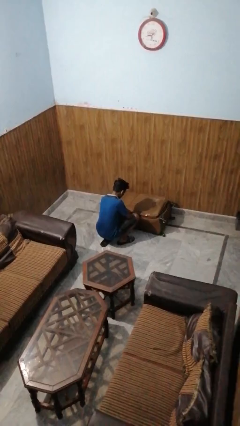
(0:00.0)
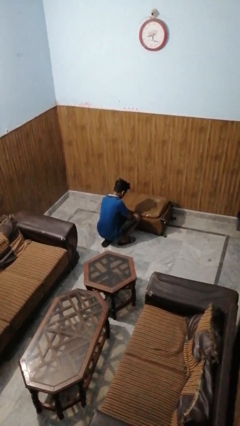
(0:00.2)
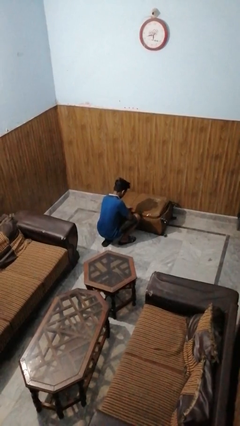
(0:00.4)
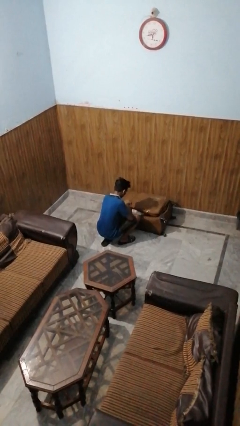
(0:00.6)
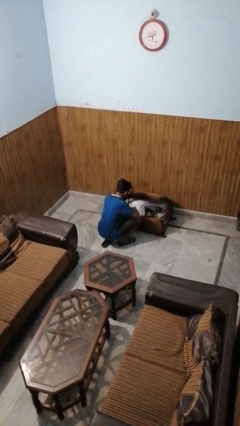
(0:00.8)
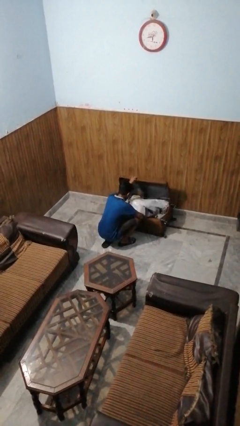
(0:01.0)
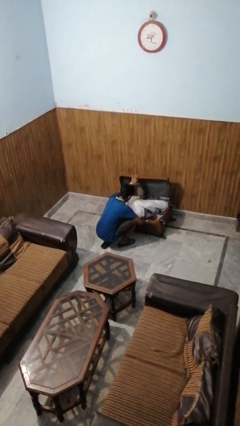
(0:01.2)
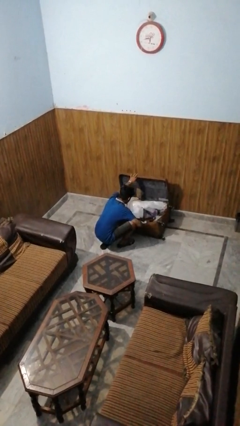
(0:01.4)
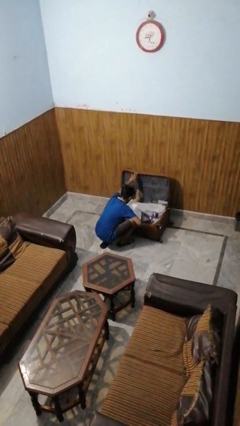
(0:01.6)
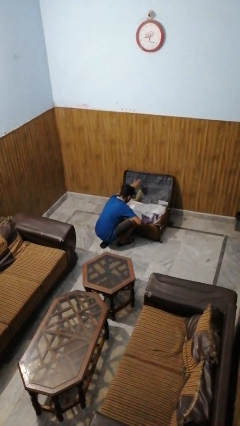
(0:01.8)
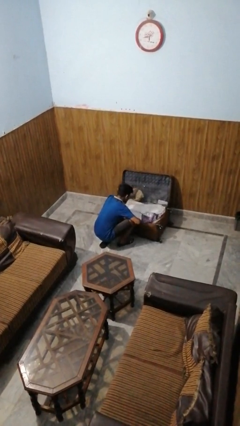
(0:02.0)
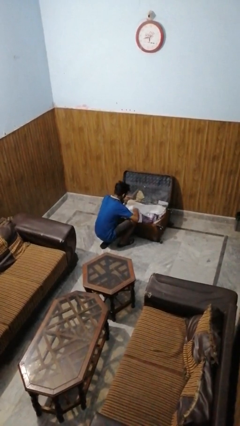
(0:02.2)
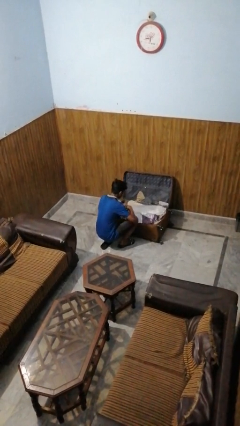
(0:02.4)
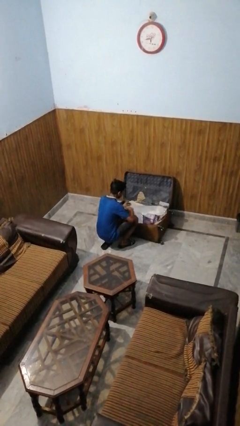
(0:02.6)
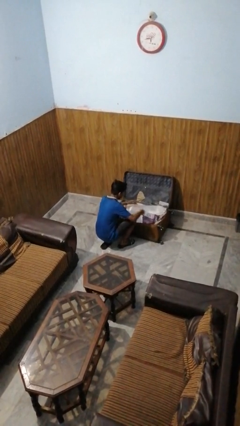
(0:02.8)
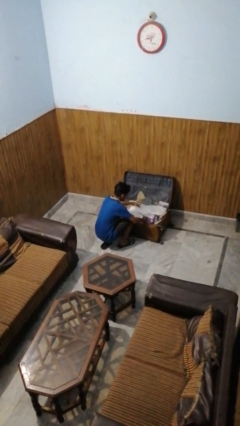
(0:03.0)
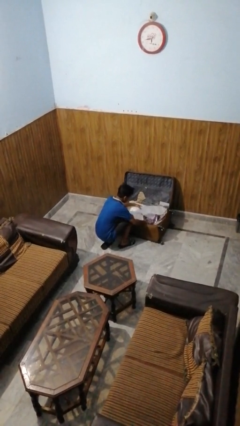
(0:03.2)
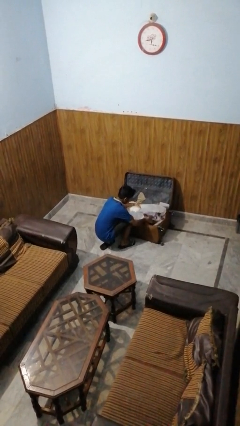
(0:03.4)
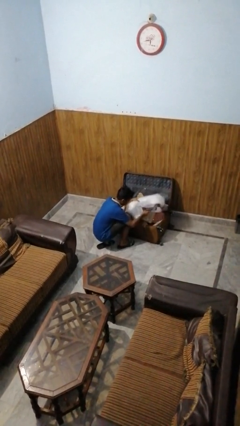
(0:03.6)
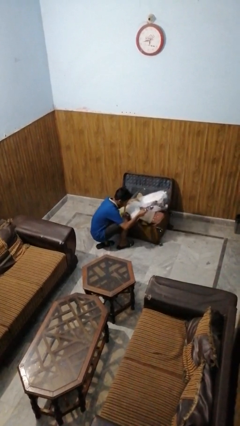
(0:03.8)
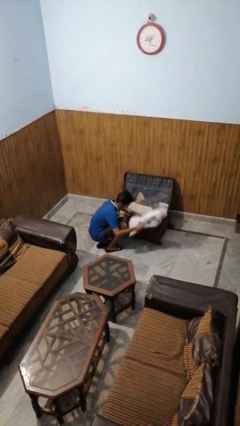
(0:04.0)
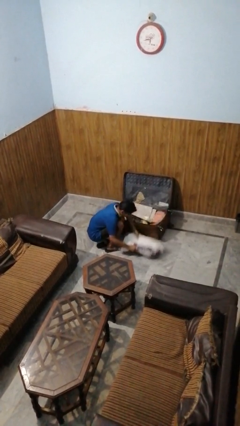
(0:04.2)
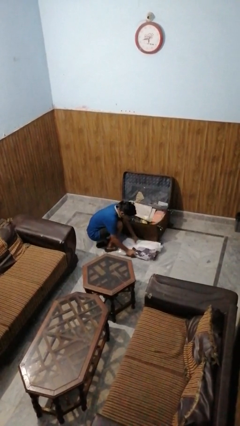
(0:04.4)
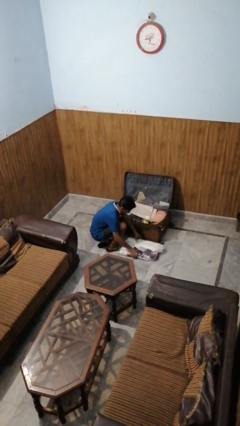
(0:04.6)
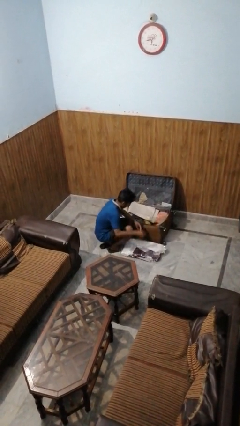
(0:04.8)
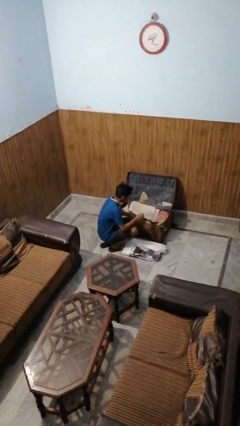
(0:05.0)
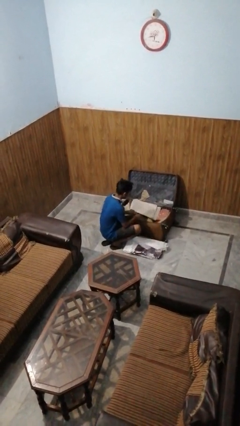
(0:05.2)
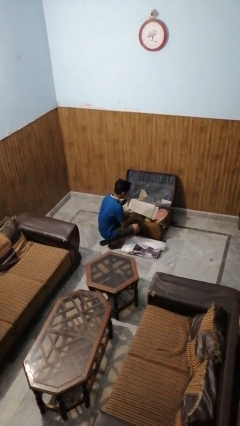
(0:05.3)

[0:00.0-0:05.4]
person unloads clothes from suitcase

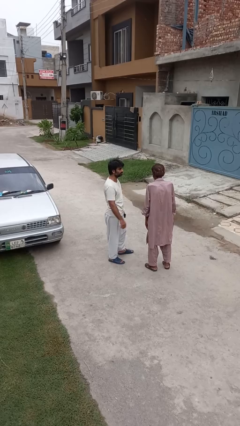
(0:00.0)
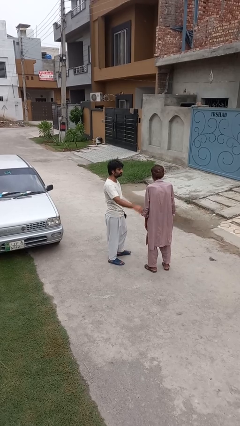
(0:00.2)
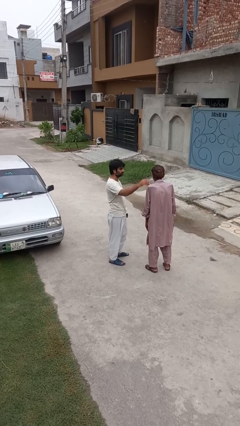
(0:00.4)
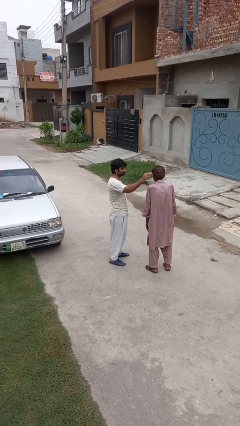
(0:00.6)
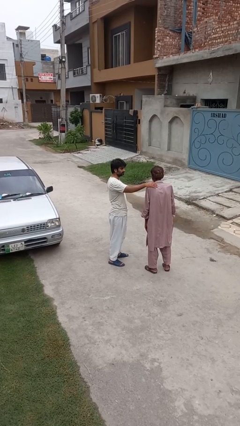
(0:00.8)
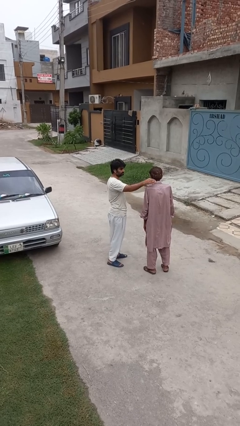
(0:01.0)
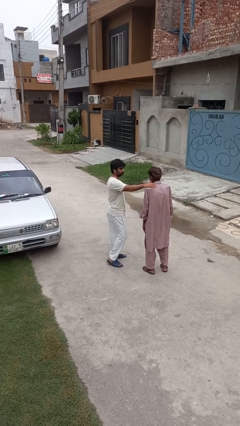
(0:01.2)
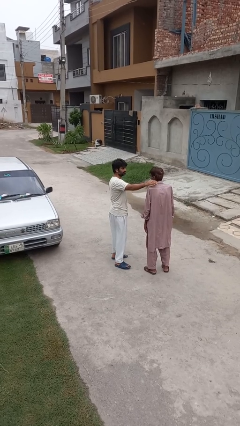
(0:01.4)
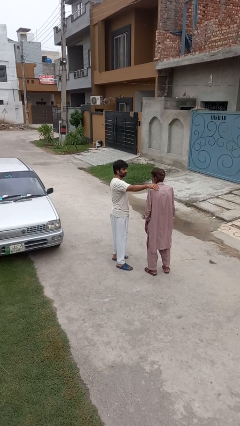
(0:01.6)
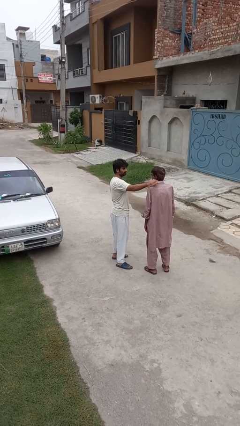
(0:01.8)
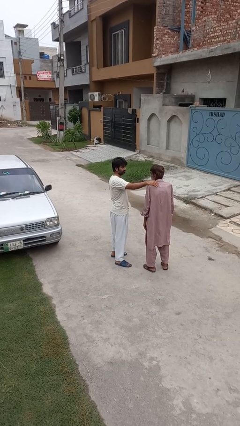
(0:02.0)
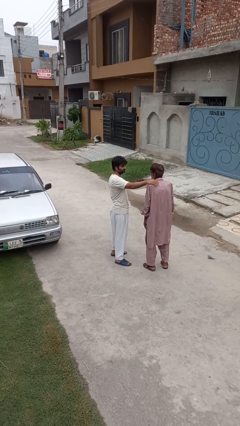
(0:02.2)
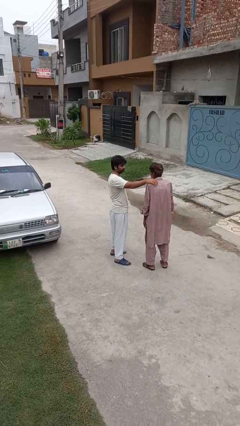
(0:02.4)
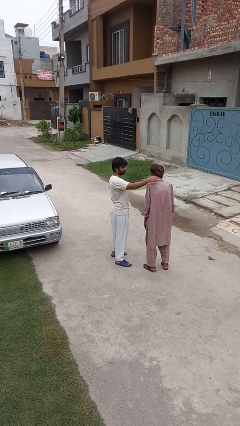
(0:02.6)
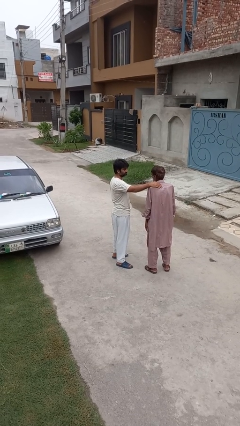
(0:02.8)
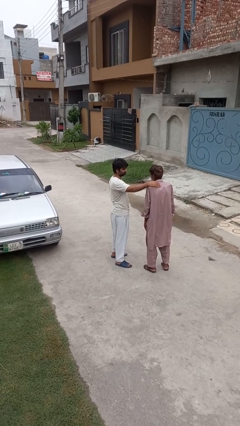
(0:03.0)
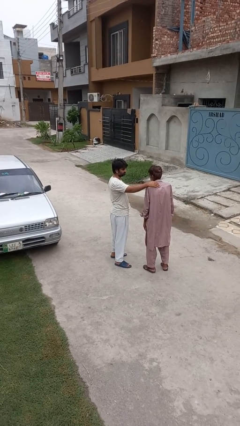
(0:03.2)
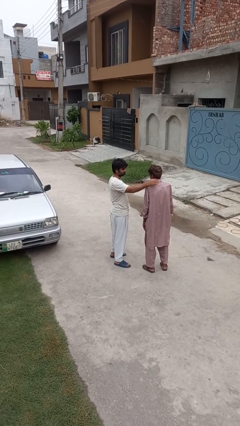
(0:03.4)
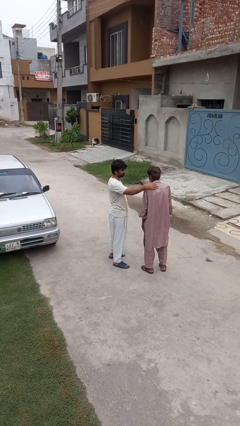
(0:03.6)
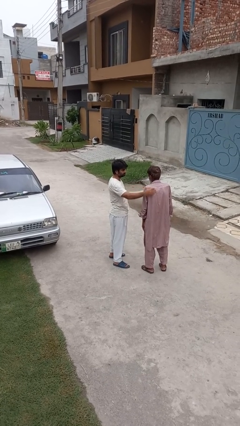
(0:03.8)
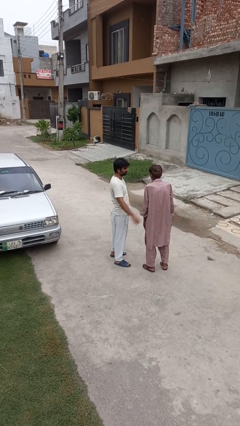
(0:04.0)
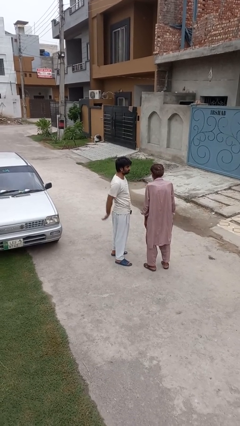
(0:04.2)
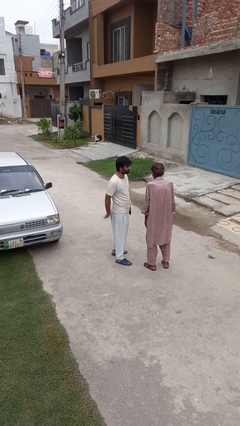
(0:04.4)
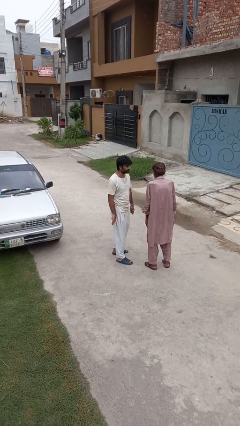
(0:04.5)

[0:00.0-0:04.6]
person pounds shoulders of person

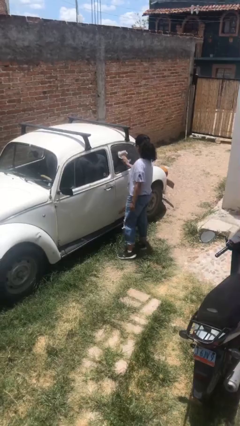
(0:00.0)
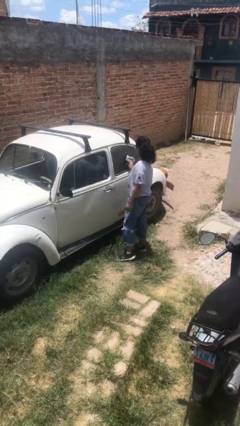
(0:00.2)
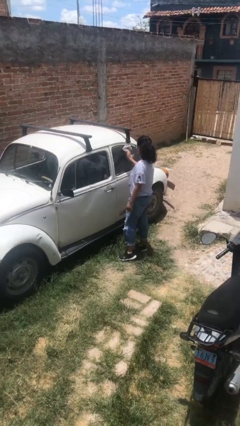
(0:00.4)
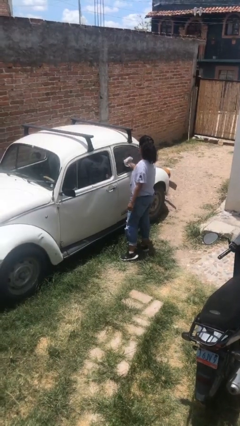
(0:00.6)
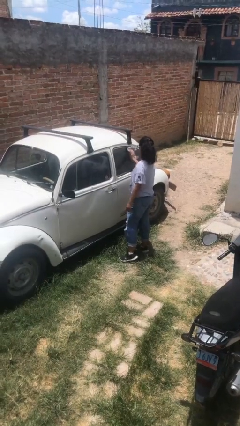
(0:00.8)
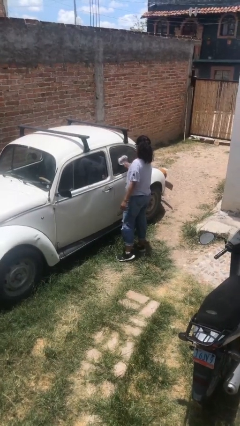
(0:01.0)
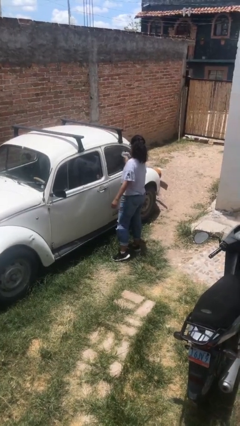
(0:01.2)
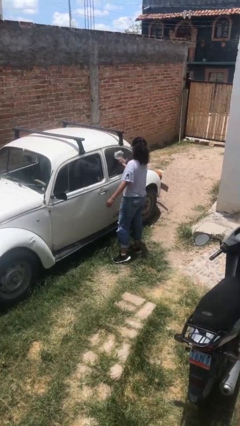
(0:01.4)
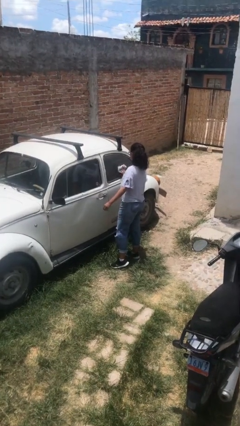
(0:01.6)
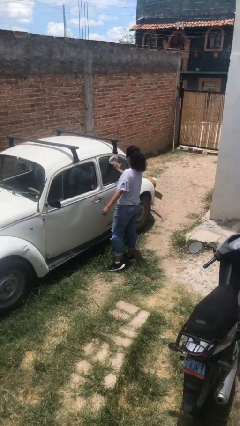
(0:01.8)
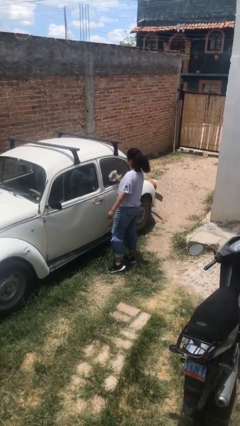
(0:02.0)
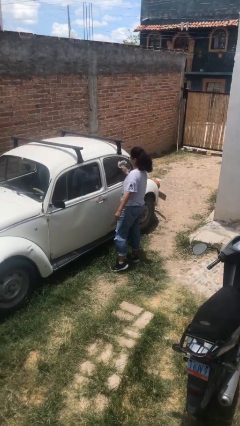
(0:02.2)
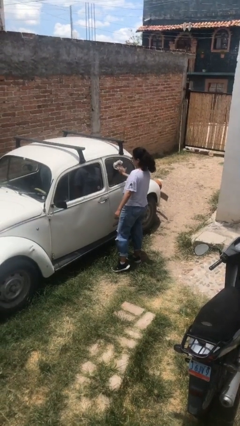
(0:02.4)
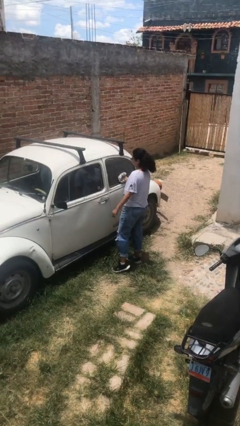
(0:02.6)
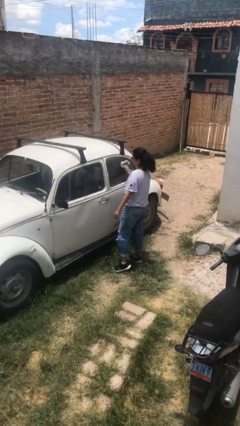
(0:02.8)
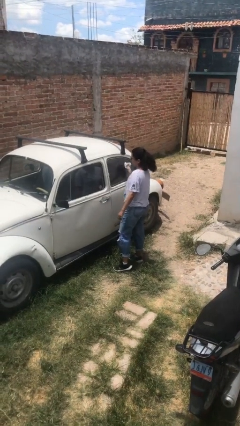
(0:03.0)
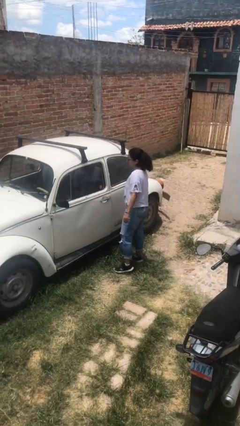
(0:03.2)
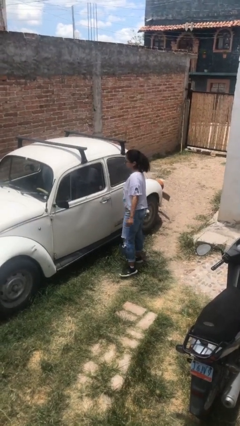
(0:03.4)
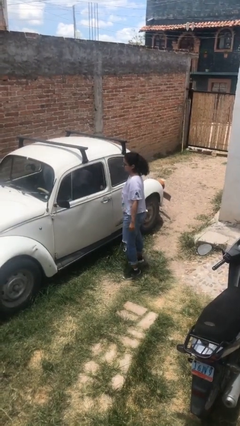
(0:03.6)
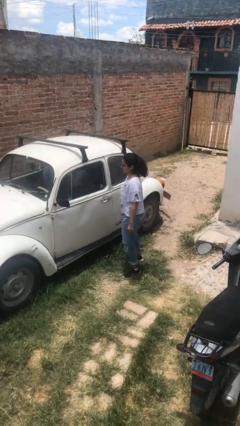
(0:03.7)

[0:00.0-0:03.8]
person polishes car with rag

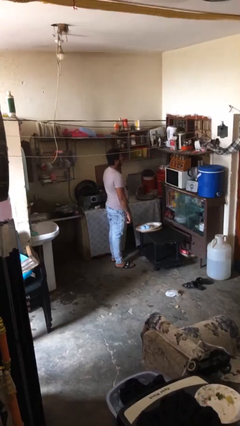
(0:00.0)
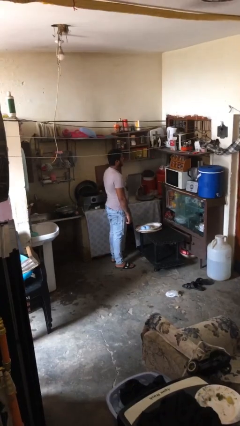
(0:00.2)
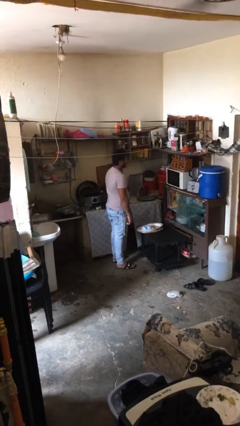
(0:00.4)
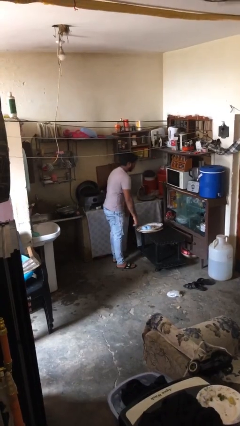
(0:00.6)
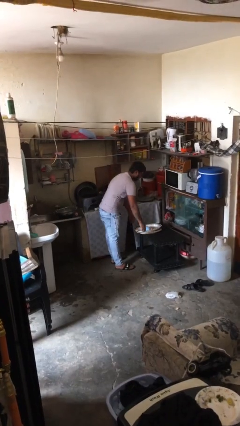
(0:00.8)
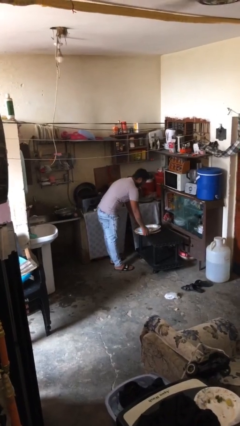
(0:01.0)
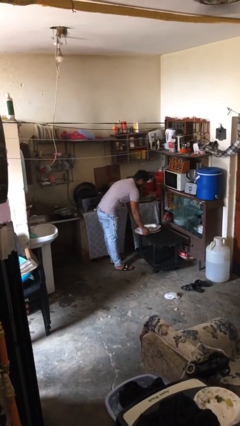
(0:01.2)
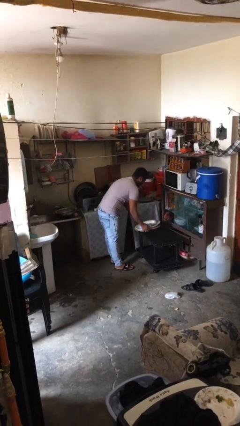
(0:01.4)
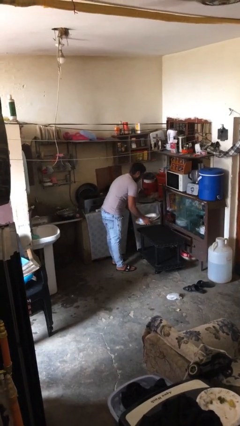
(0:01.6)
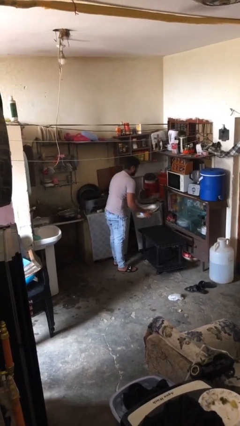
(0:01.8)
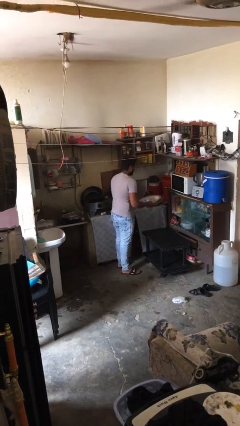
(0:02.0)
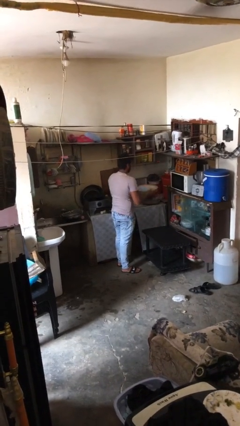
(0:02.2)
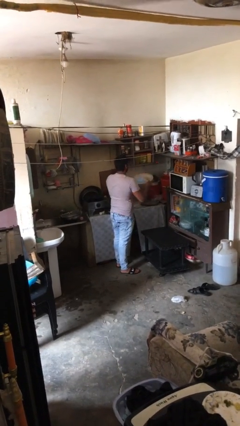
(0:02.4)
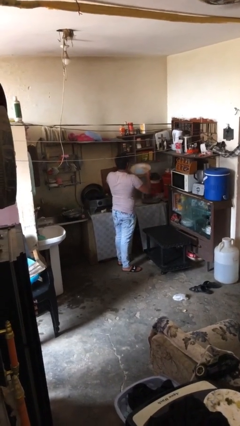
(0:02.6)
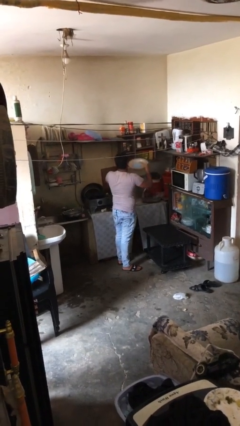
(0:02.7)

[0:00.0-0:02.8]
person picks up object from table

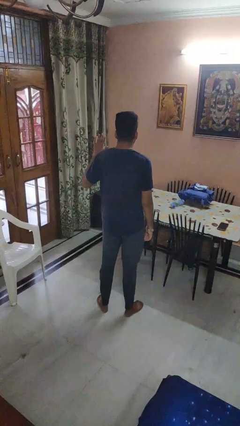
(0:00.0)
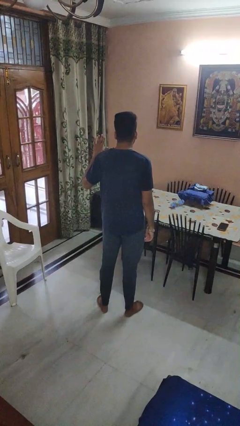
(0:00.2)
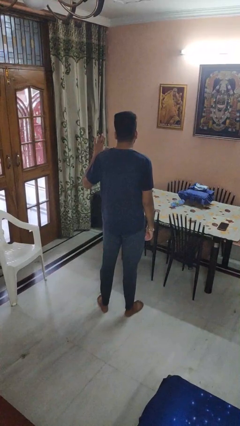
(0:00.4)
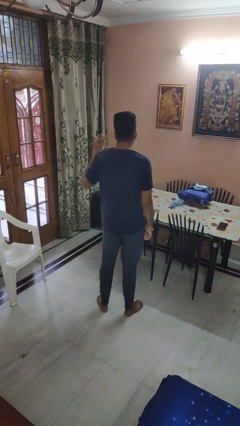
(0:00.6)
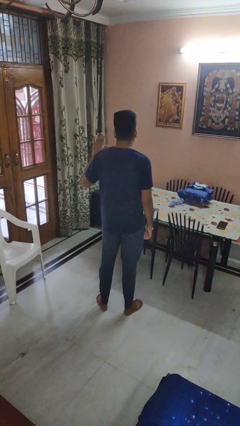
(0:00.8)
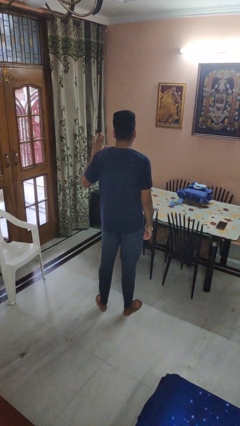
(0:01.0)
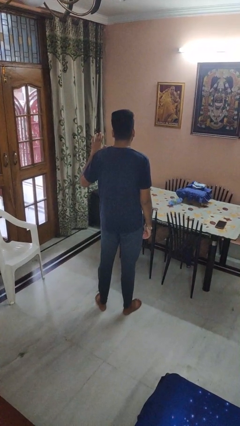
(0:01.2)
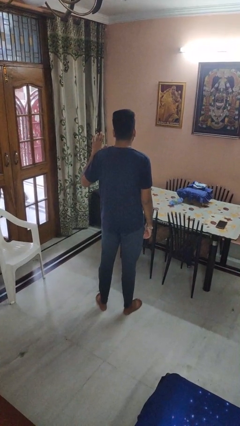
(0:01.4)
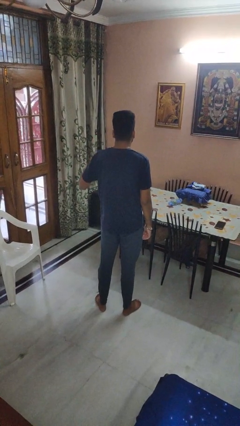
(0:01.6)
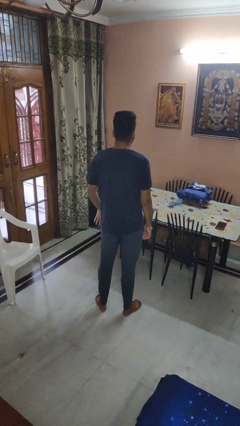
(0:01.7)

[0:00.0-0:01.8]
person gestures number five
